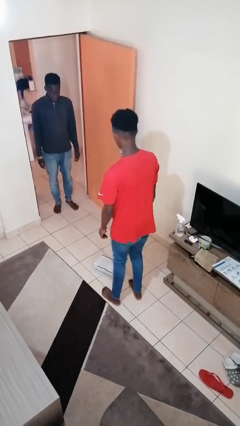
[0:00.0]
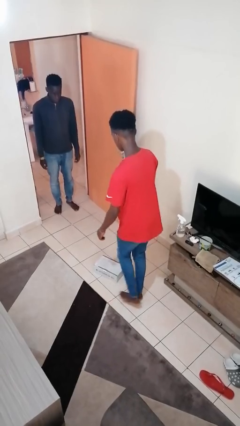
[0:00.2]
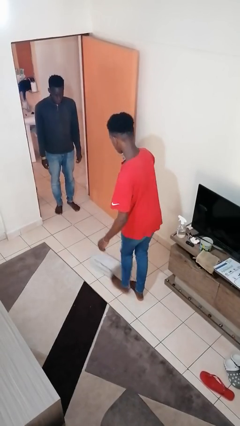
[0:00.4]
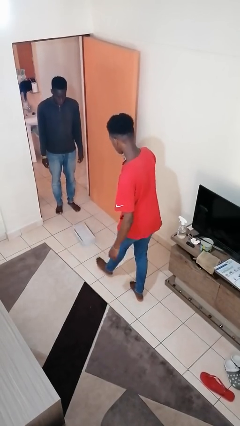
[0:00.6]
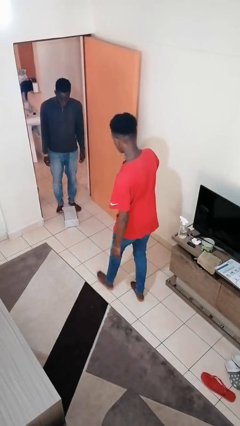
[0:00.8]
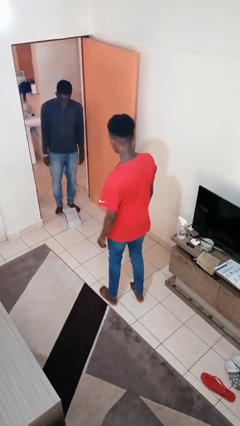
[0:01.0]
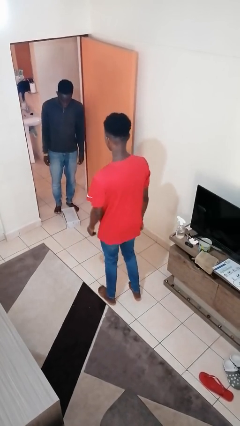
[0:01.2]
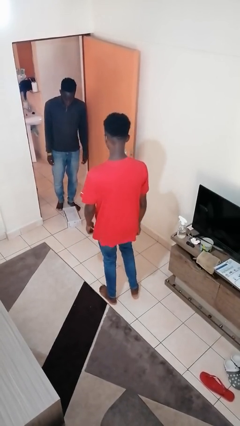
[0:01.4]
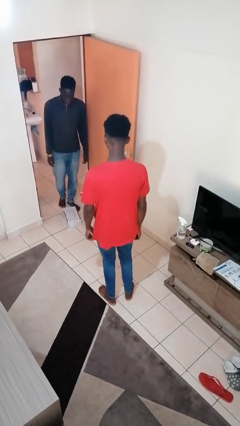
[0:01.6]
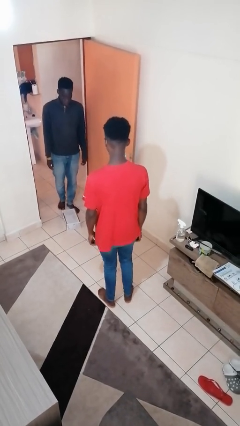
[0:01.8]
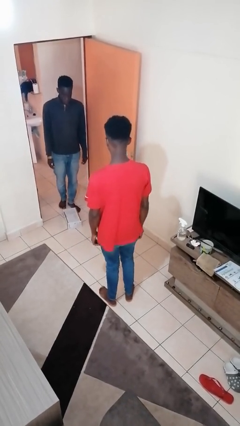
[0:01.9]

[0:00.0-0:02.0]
person kicks object to person

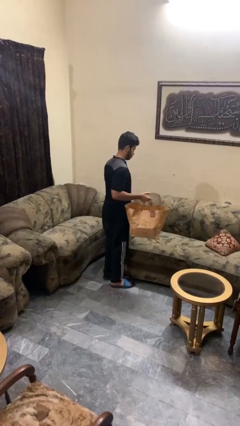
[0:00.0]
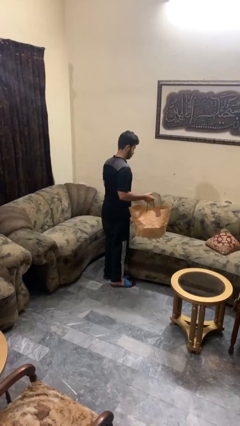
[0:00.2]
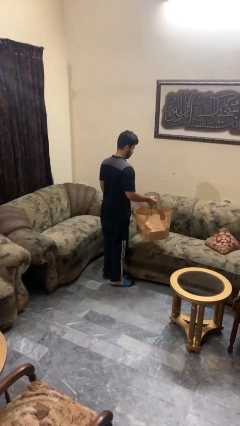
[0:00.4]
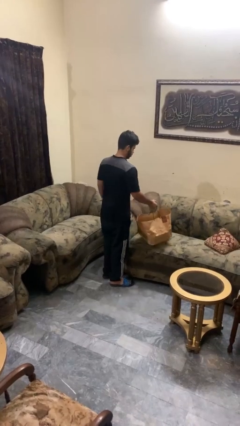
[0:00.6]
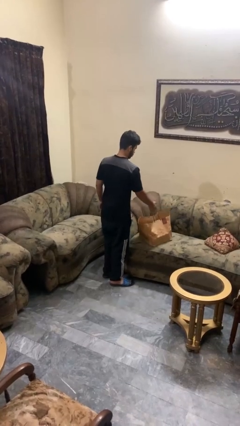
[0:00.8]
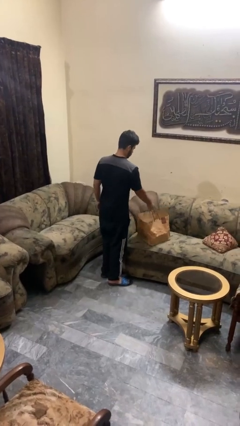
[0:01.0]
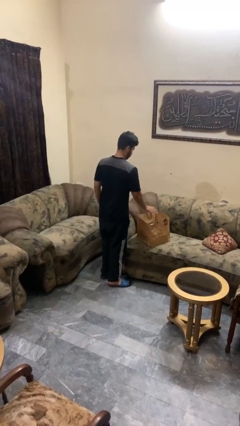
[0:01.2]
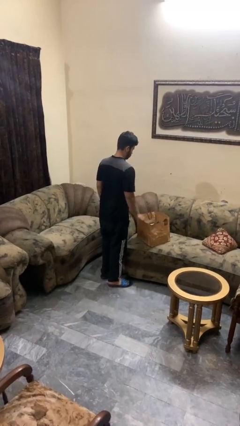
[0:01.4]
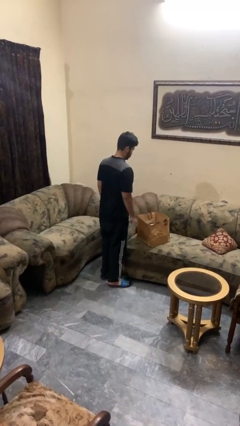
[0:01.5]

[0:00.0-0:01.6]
person puts down object on couch

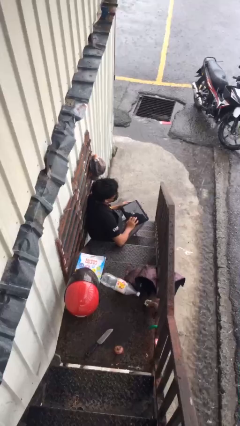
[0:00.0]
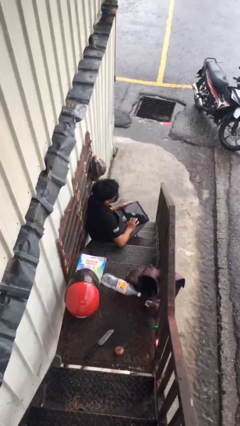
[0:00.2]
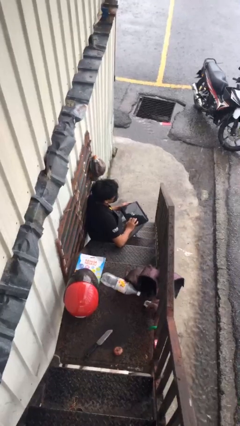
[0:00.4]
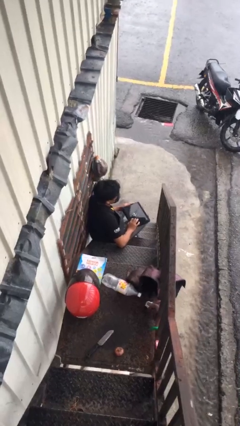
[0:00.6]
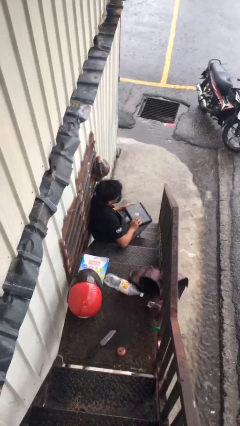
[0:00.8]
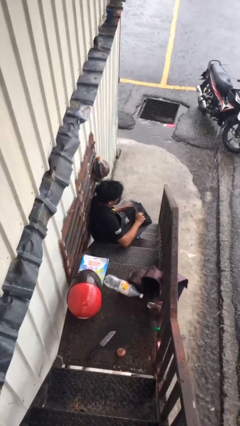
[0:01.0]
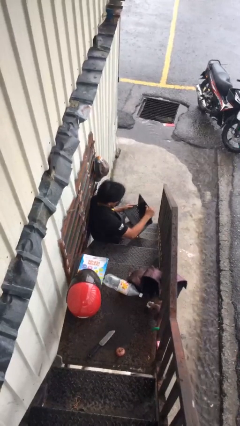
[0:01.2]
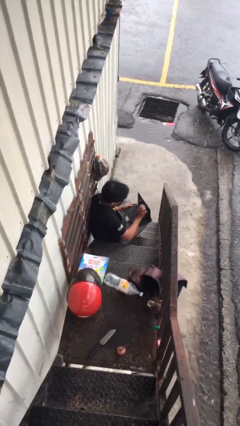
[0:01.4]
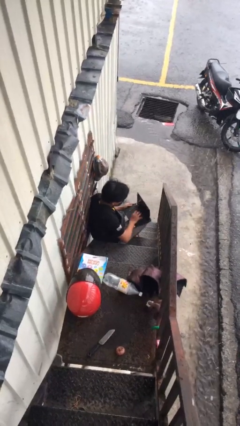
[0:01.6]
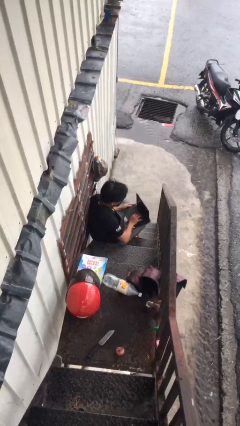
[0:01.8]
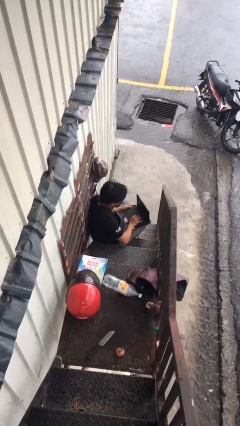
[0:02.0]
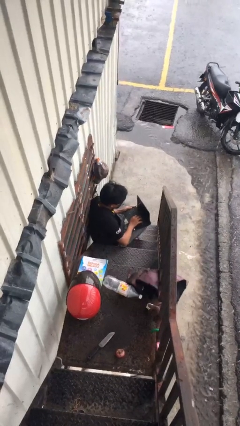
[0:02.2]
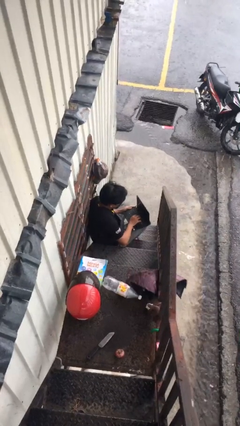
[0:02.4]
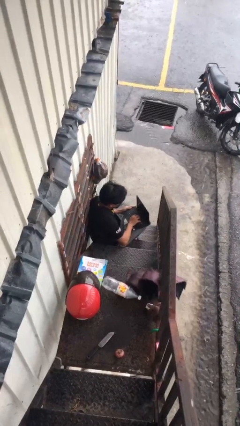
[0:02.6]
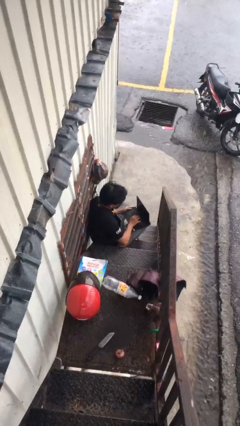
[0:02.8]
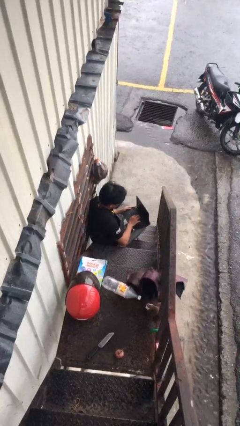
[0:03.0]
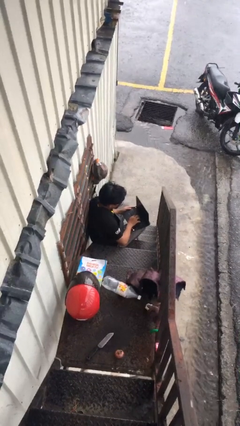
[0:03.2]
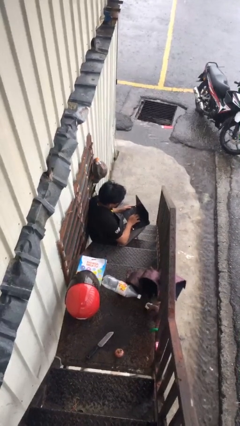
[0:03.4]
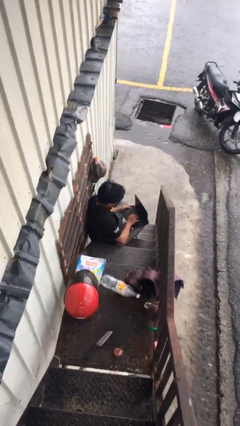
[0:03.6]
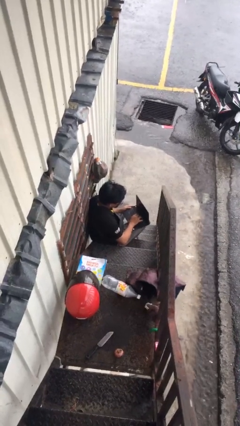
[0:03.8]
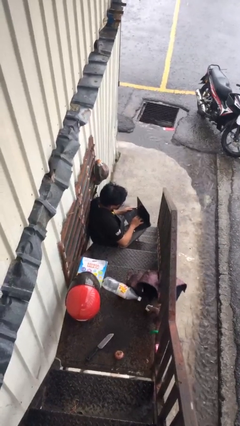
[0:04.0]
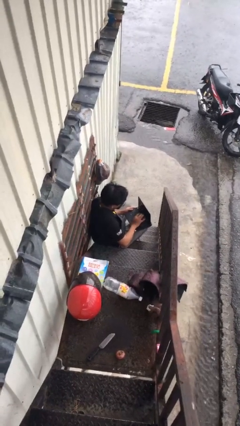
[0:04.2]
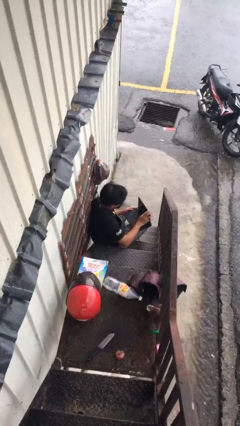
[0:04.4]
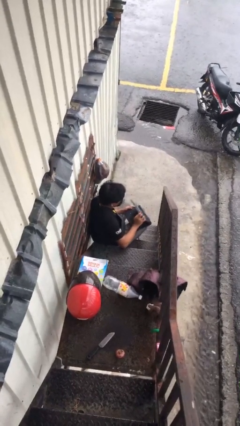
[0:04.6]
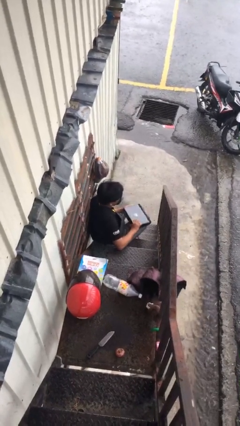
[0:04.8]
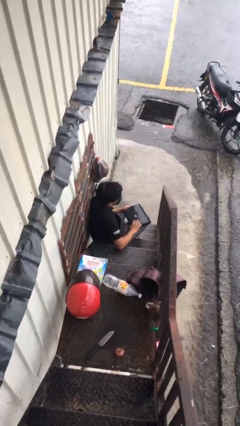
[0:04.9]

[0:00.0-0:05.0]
person interacts with laptop

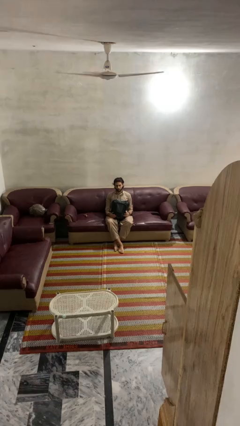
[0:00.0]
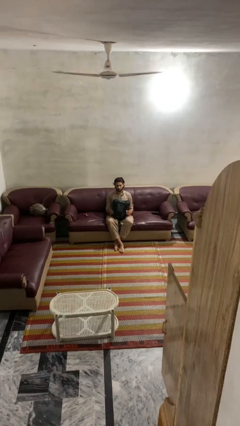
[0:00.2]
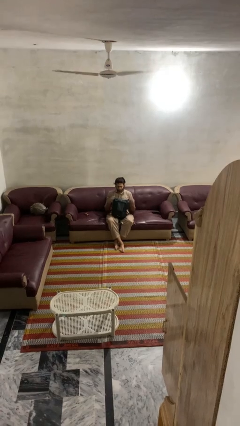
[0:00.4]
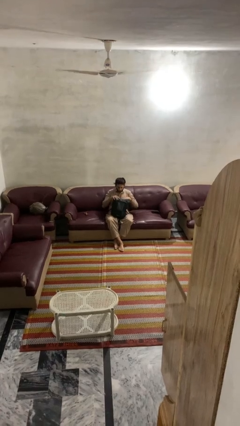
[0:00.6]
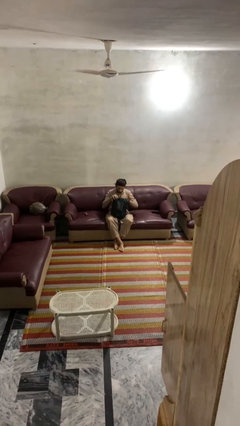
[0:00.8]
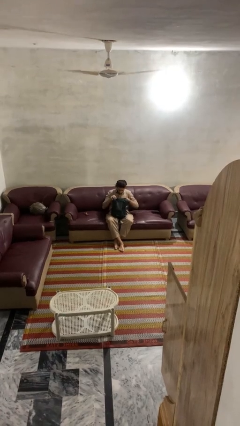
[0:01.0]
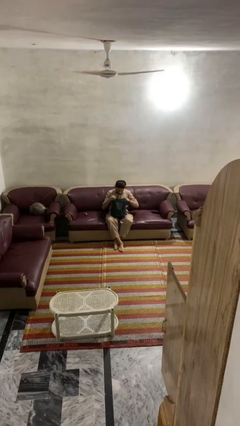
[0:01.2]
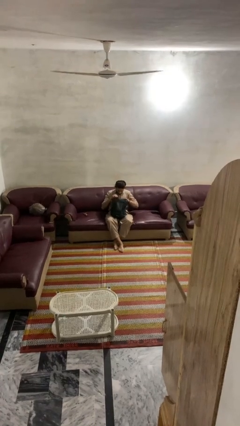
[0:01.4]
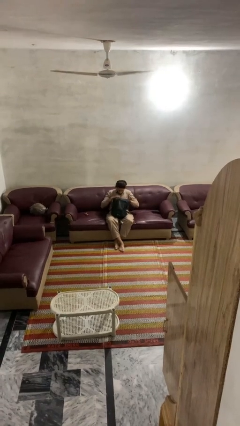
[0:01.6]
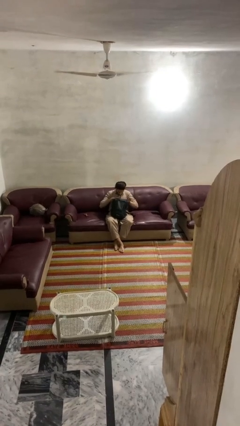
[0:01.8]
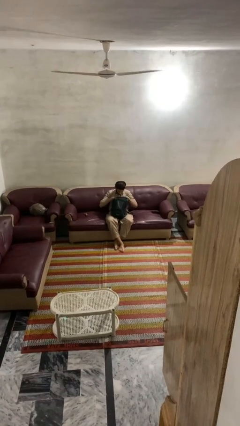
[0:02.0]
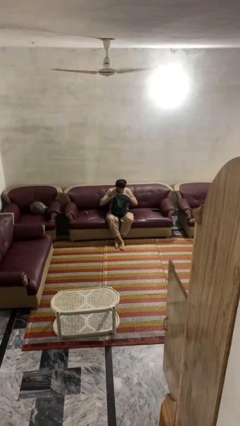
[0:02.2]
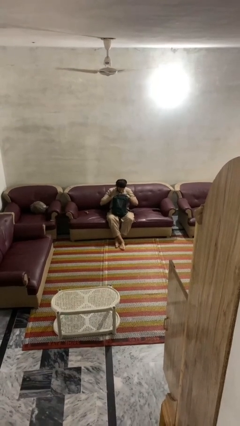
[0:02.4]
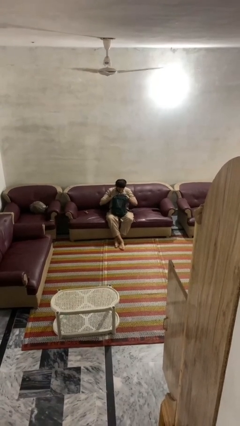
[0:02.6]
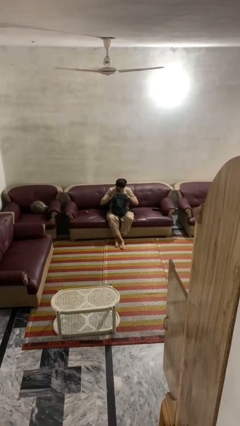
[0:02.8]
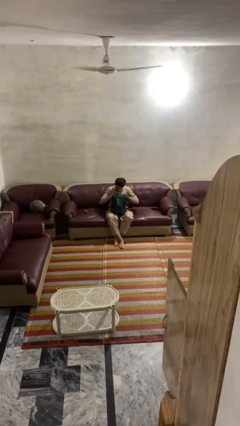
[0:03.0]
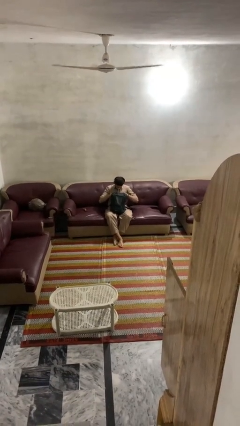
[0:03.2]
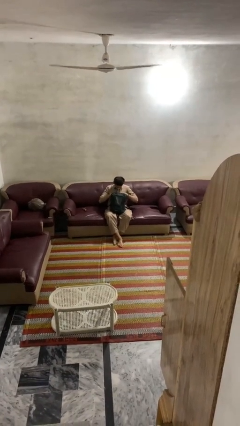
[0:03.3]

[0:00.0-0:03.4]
person searches in backpack

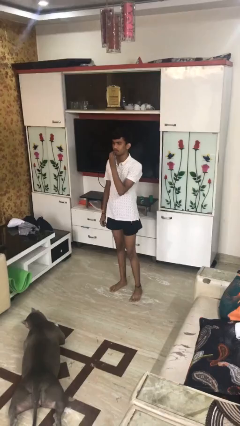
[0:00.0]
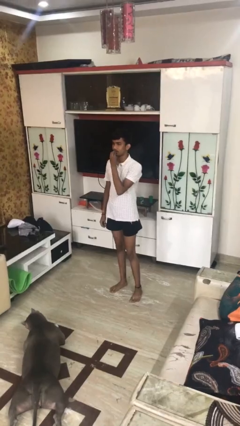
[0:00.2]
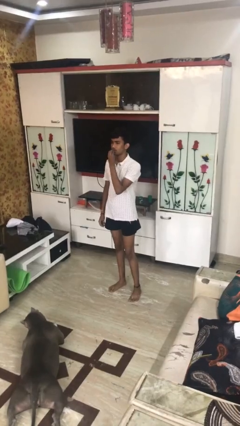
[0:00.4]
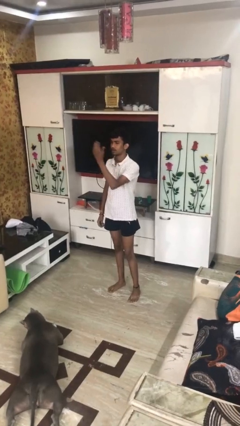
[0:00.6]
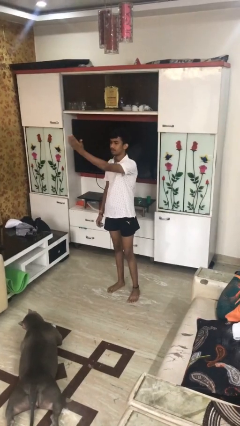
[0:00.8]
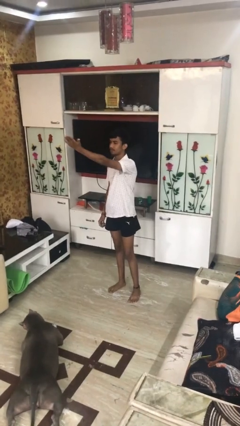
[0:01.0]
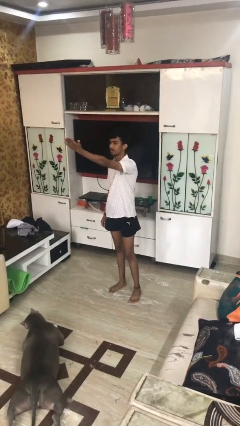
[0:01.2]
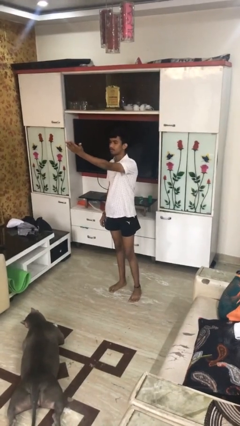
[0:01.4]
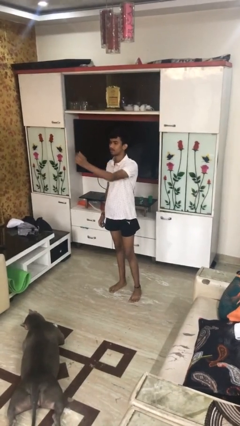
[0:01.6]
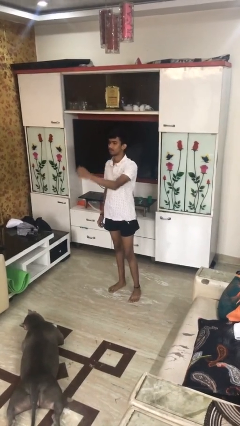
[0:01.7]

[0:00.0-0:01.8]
person gestures blow kiss

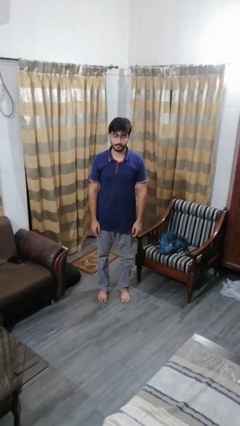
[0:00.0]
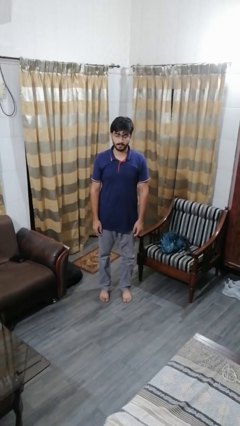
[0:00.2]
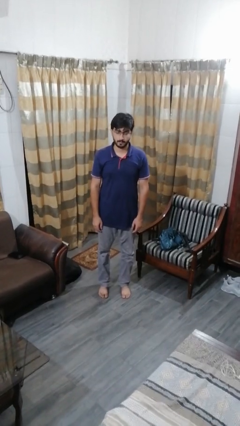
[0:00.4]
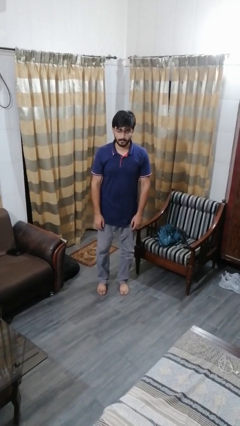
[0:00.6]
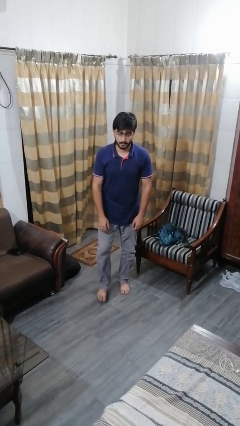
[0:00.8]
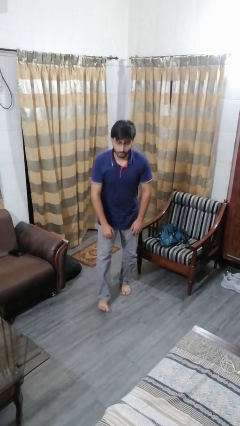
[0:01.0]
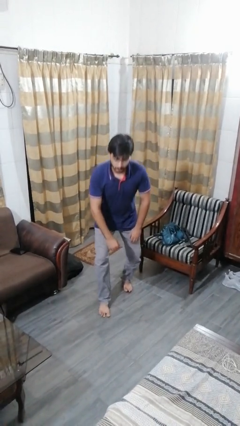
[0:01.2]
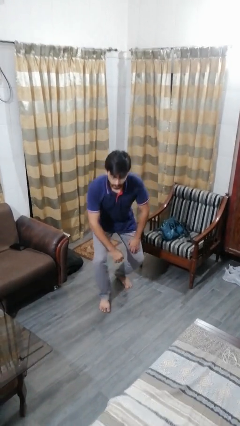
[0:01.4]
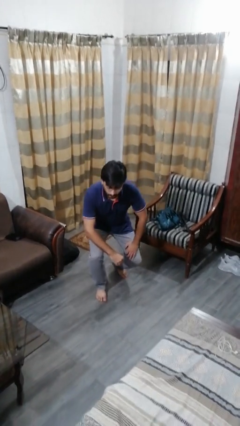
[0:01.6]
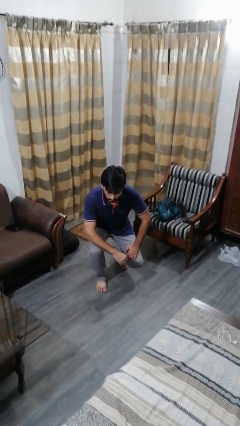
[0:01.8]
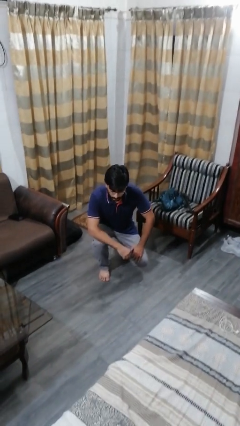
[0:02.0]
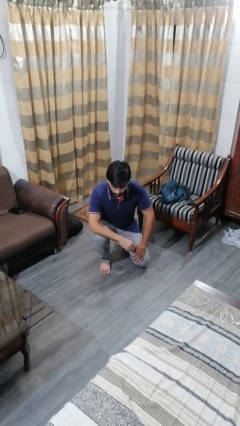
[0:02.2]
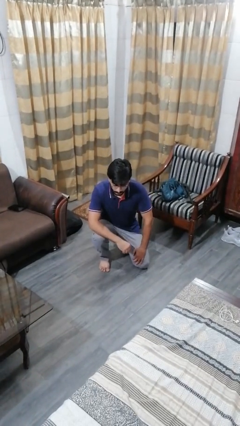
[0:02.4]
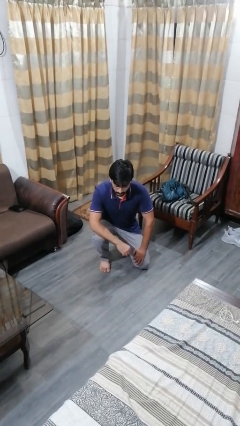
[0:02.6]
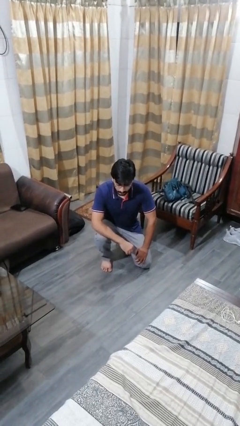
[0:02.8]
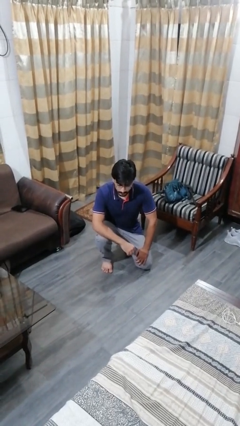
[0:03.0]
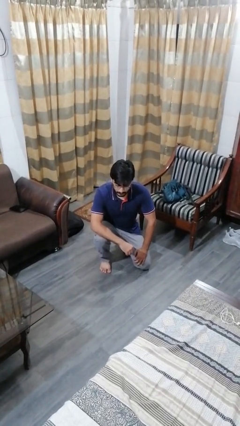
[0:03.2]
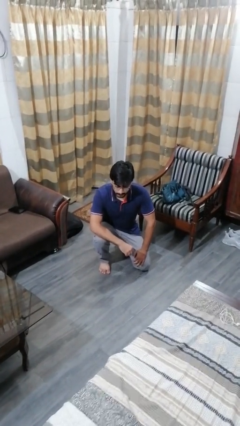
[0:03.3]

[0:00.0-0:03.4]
person kneels

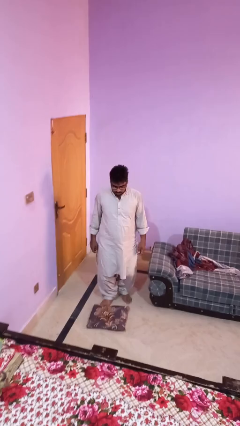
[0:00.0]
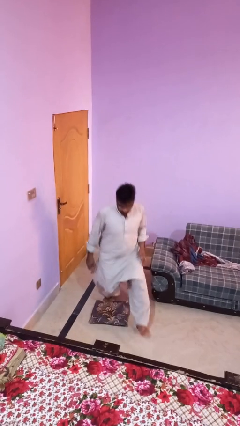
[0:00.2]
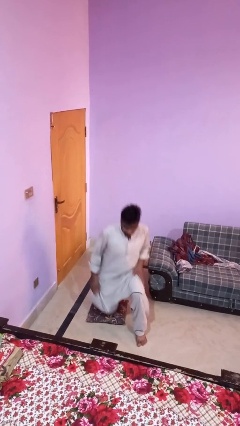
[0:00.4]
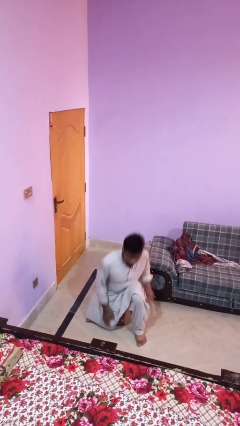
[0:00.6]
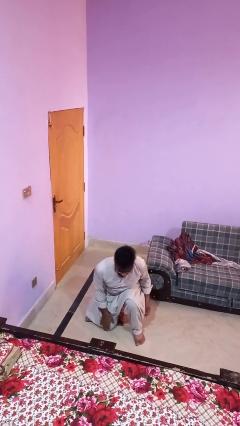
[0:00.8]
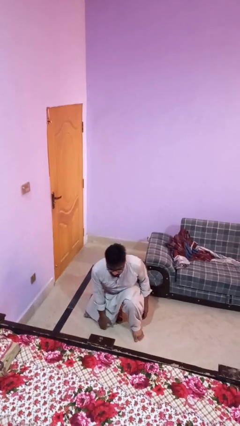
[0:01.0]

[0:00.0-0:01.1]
person trips on object on floor
